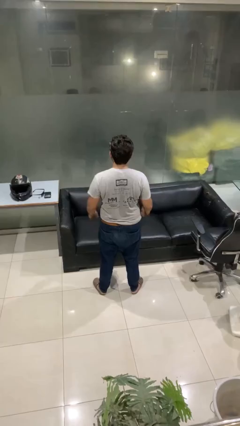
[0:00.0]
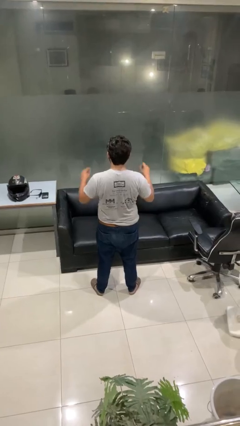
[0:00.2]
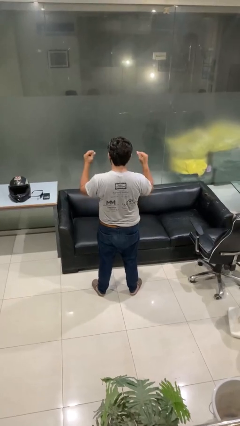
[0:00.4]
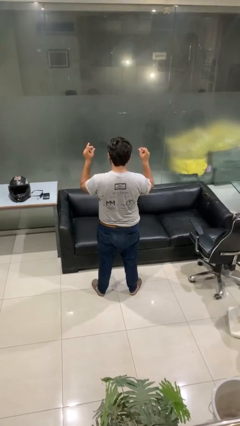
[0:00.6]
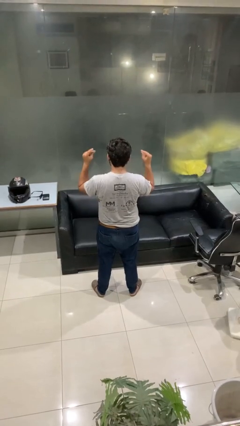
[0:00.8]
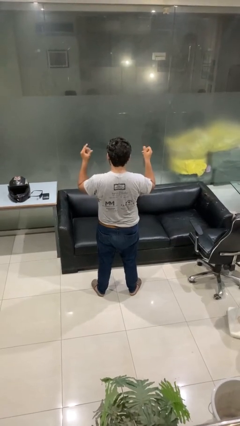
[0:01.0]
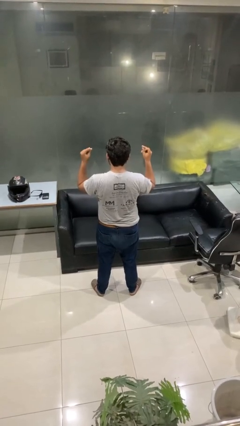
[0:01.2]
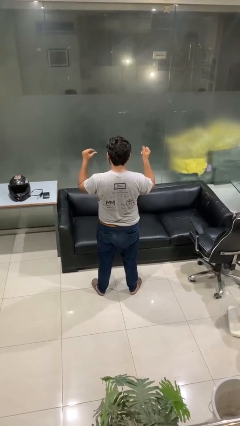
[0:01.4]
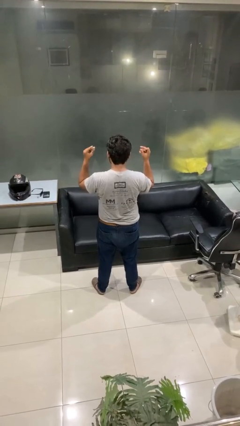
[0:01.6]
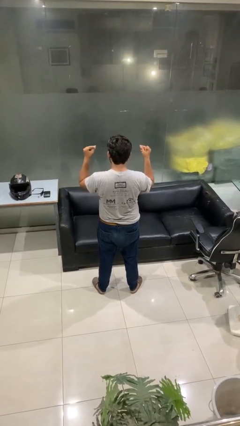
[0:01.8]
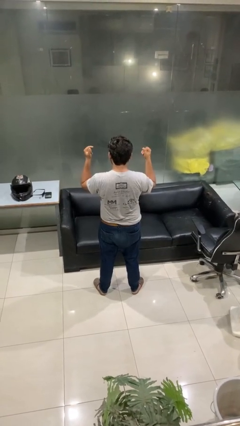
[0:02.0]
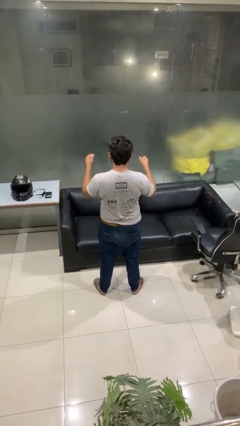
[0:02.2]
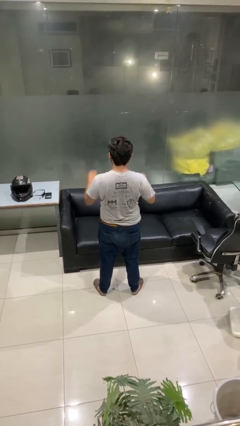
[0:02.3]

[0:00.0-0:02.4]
person snaps fingers

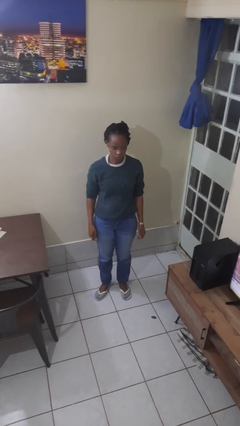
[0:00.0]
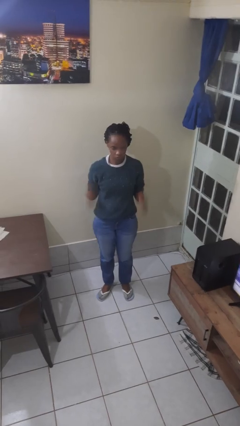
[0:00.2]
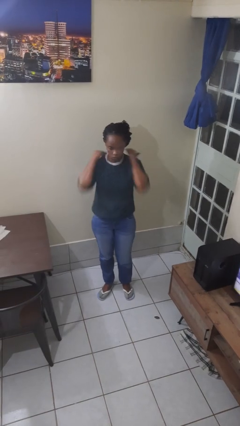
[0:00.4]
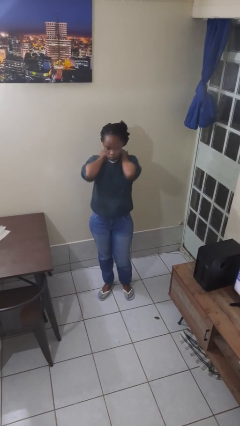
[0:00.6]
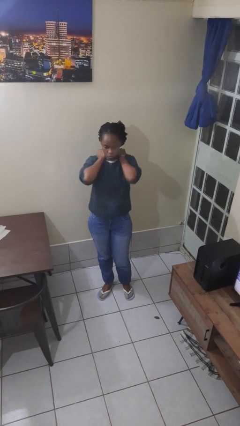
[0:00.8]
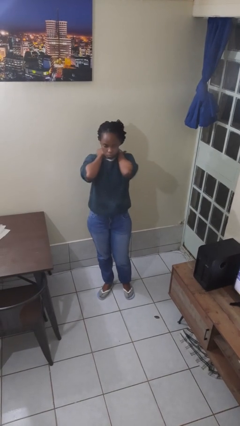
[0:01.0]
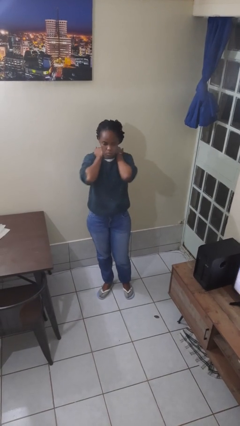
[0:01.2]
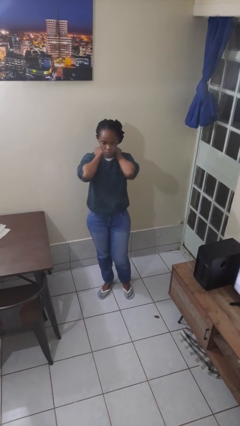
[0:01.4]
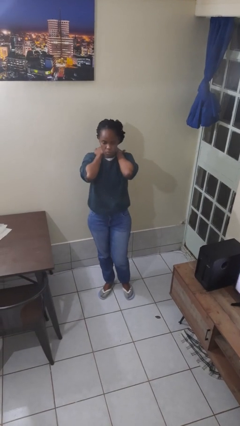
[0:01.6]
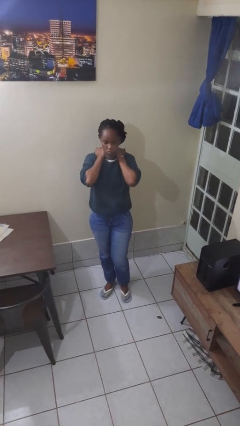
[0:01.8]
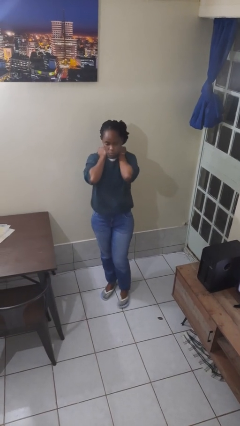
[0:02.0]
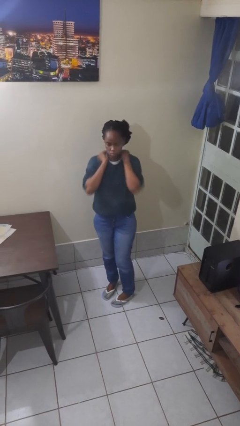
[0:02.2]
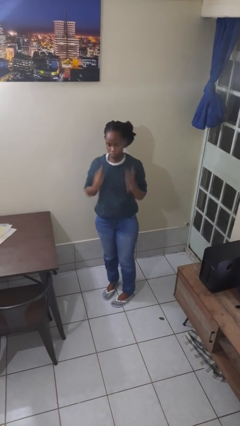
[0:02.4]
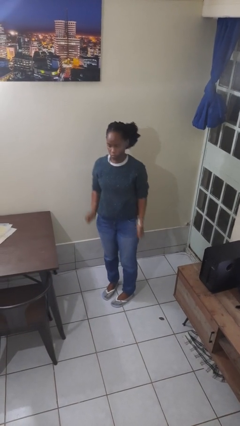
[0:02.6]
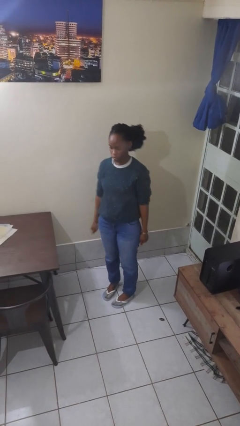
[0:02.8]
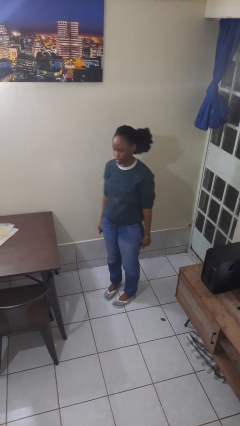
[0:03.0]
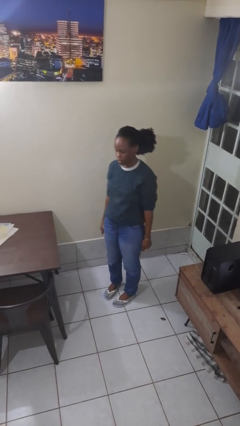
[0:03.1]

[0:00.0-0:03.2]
person rubs neck

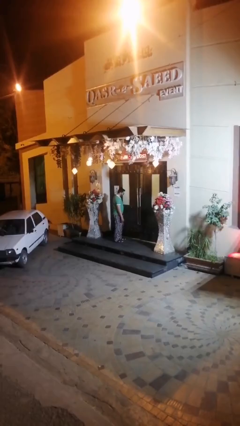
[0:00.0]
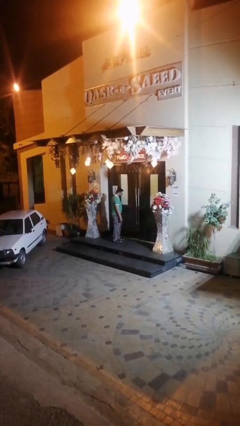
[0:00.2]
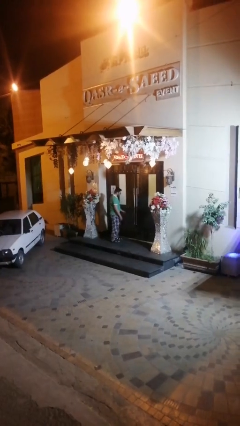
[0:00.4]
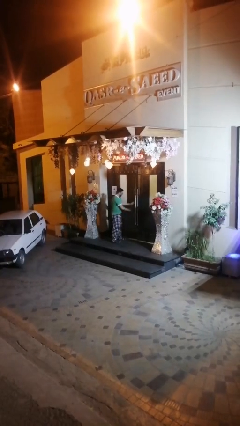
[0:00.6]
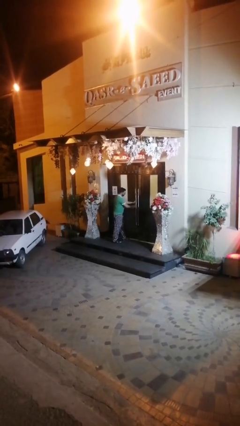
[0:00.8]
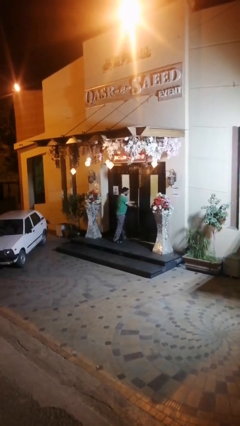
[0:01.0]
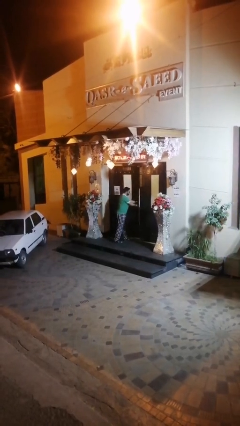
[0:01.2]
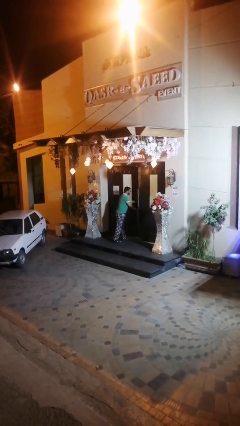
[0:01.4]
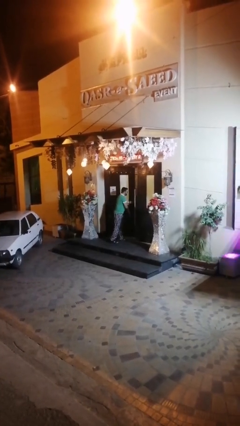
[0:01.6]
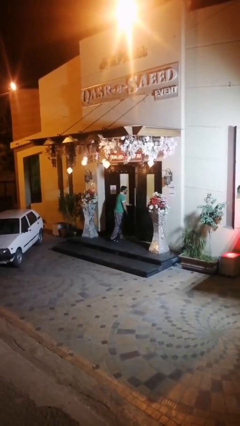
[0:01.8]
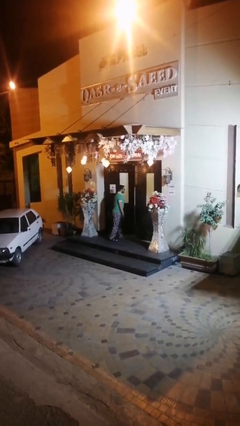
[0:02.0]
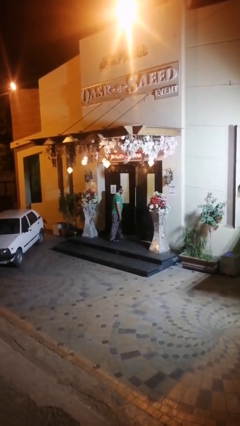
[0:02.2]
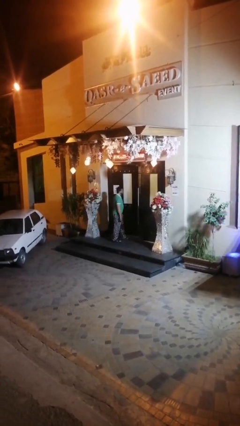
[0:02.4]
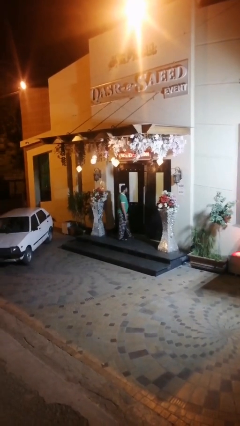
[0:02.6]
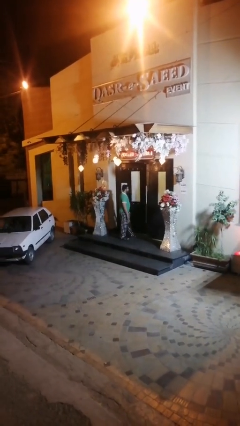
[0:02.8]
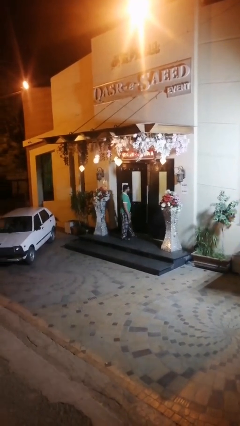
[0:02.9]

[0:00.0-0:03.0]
person opens facility door

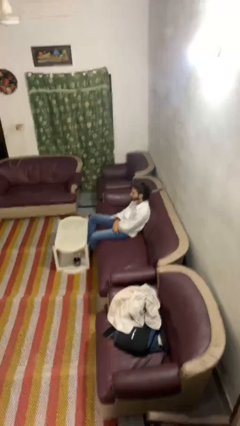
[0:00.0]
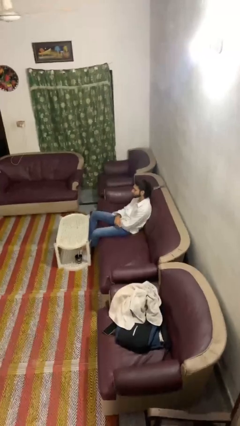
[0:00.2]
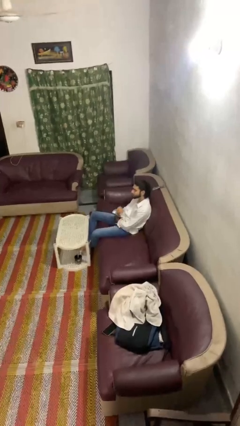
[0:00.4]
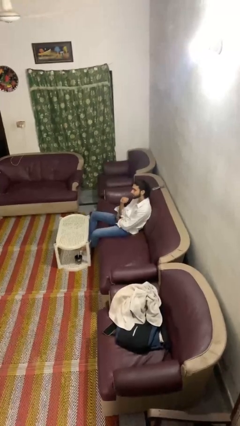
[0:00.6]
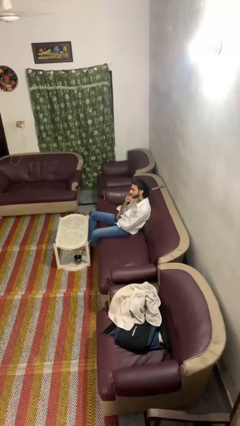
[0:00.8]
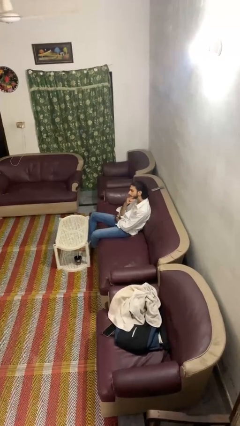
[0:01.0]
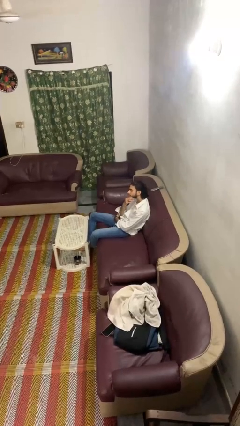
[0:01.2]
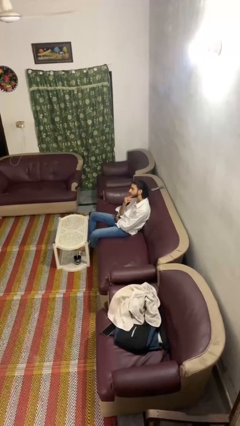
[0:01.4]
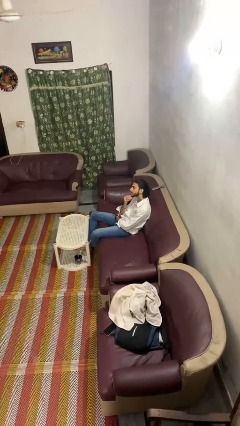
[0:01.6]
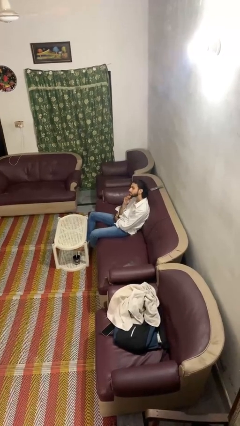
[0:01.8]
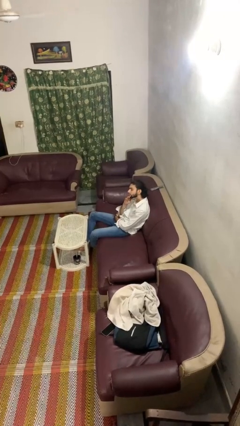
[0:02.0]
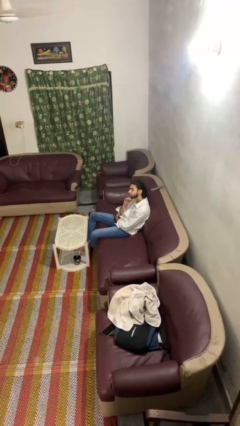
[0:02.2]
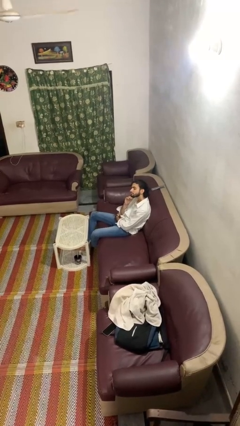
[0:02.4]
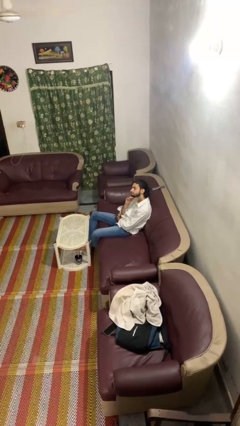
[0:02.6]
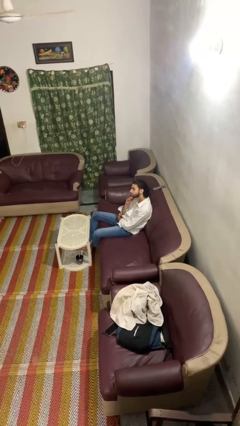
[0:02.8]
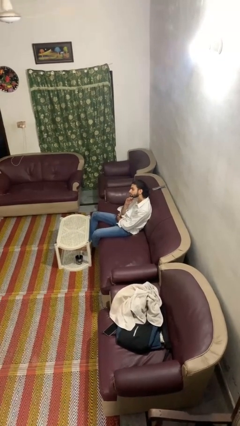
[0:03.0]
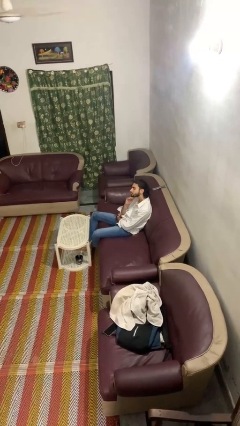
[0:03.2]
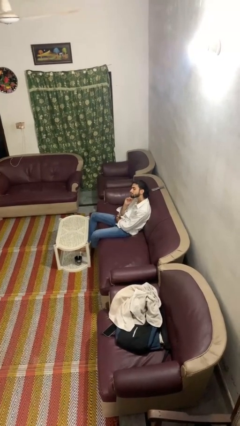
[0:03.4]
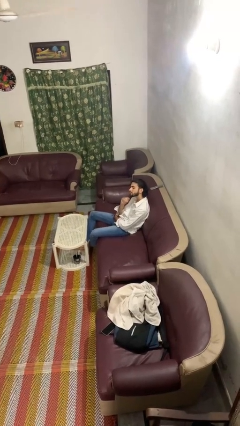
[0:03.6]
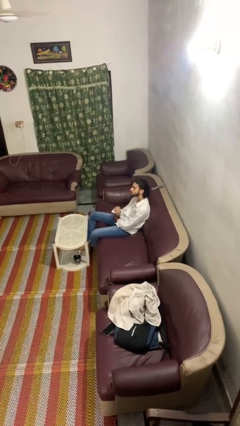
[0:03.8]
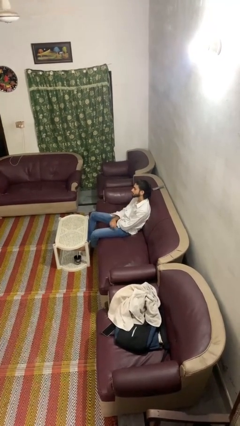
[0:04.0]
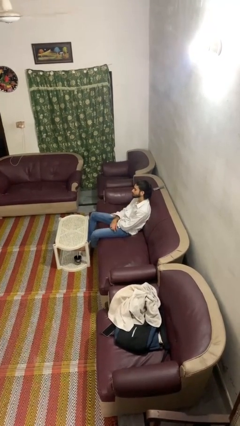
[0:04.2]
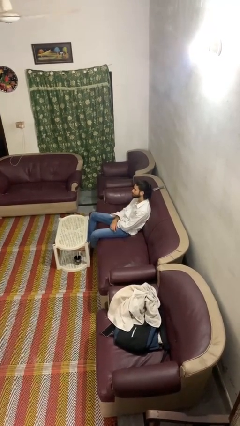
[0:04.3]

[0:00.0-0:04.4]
person strokes chin

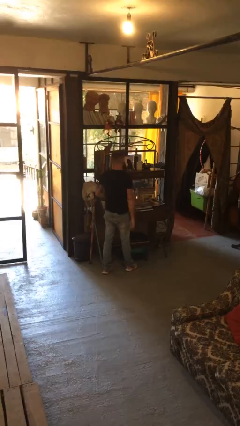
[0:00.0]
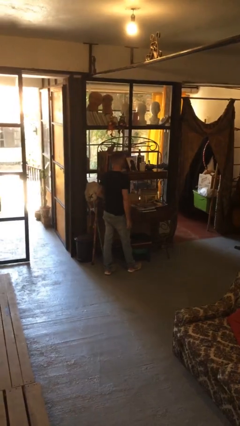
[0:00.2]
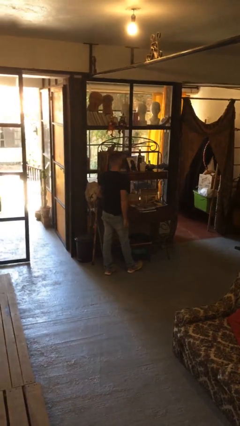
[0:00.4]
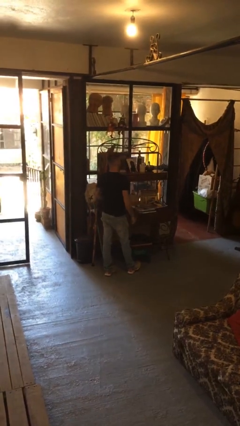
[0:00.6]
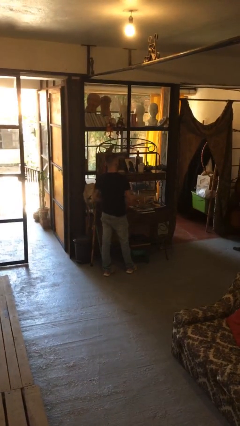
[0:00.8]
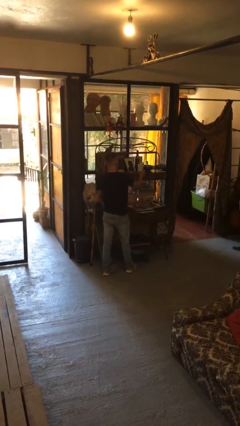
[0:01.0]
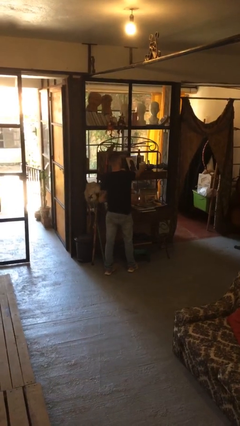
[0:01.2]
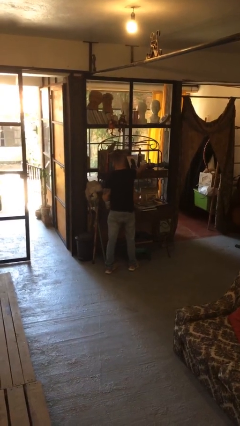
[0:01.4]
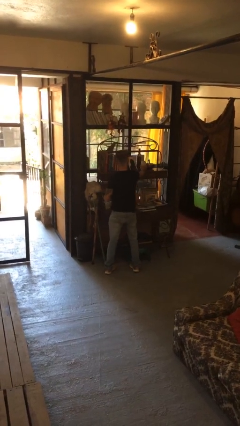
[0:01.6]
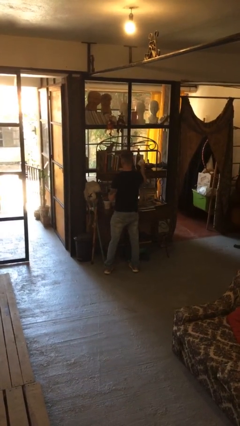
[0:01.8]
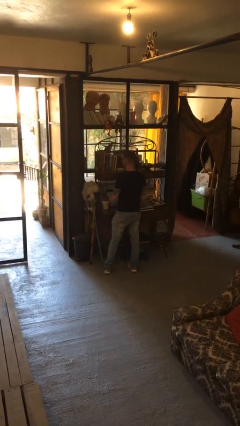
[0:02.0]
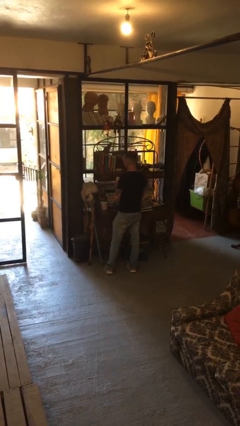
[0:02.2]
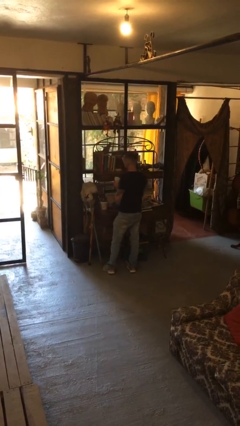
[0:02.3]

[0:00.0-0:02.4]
person picks up object from countertop

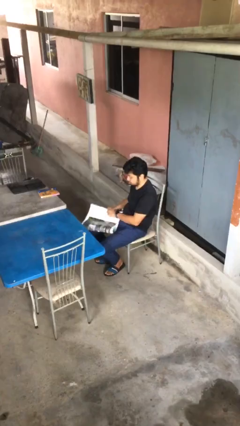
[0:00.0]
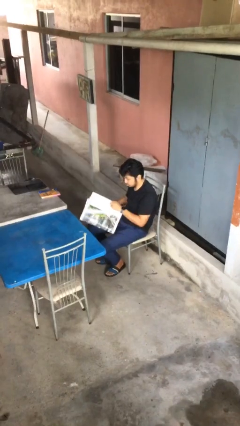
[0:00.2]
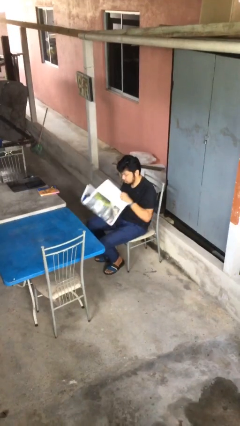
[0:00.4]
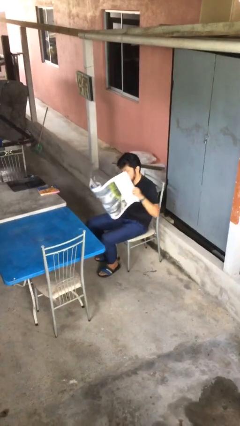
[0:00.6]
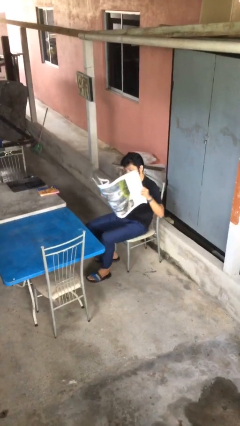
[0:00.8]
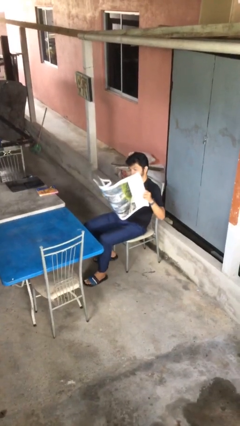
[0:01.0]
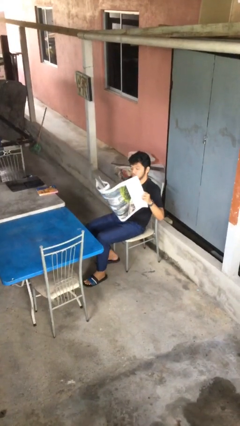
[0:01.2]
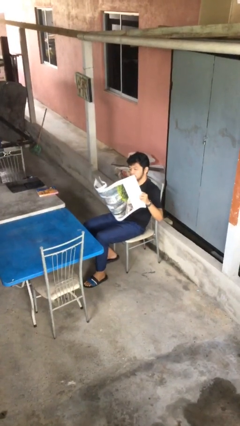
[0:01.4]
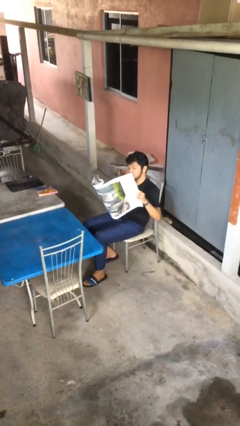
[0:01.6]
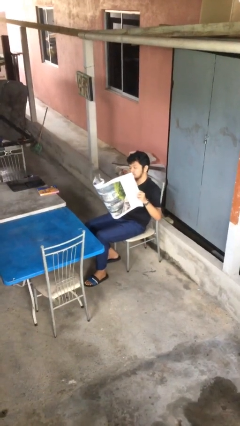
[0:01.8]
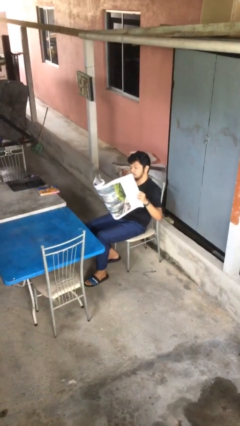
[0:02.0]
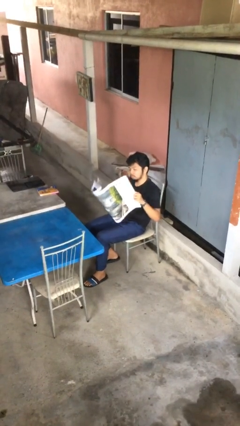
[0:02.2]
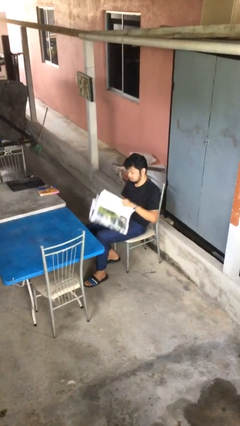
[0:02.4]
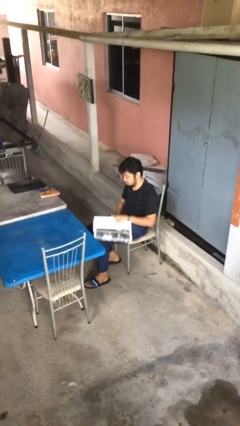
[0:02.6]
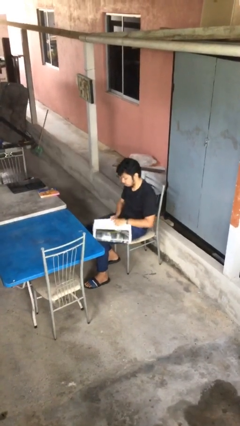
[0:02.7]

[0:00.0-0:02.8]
person reads newspaper
